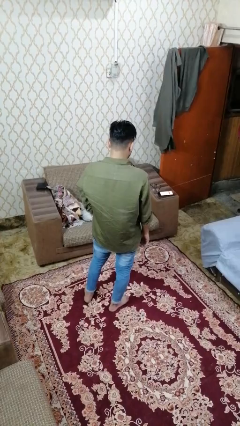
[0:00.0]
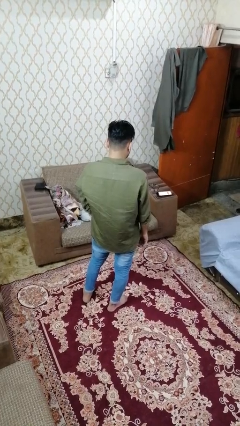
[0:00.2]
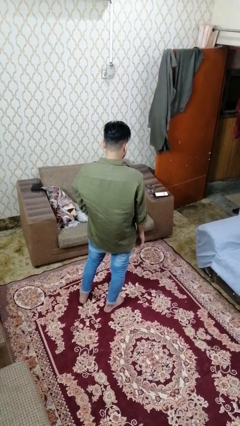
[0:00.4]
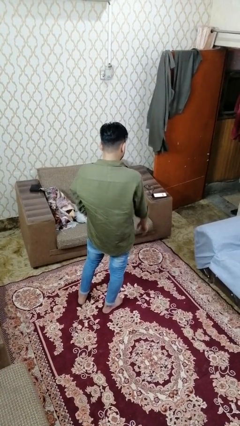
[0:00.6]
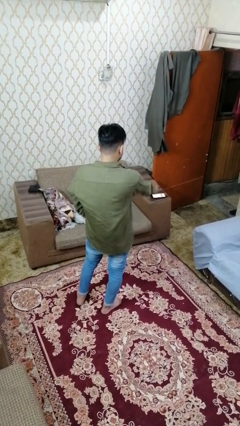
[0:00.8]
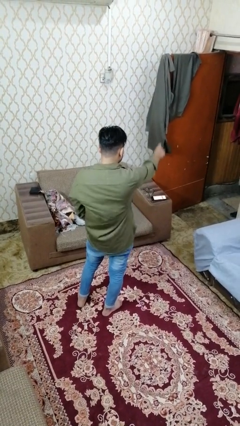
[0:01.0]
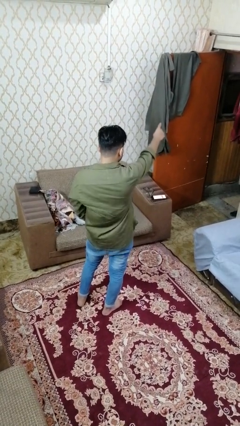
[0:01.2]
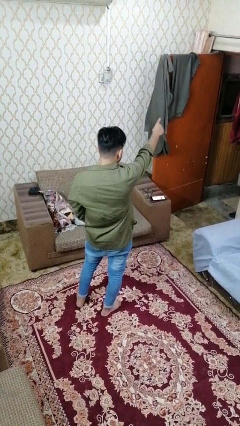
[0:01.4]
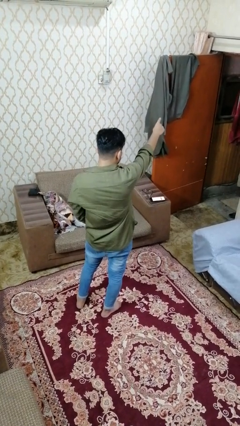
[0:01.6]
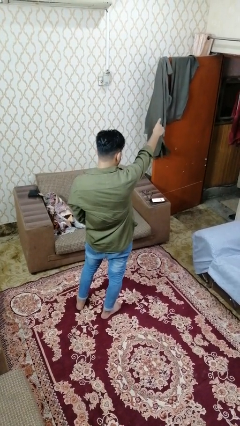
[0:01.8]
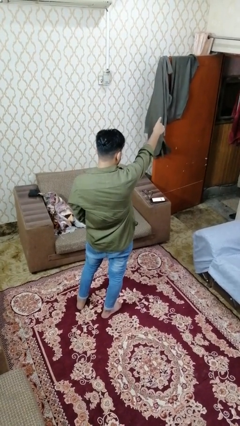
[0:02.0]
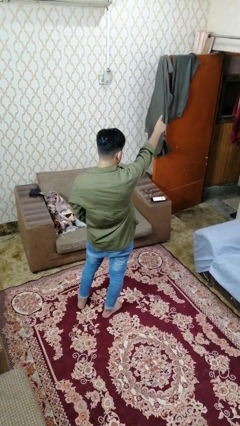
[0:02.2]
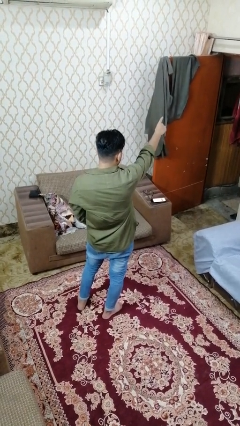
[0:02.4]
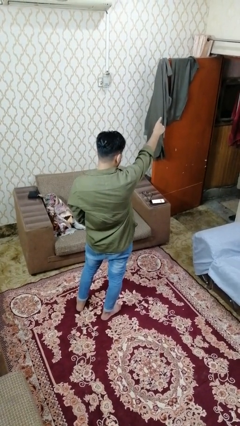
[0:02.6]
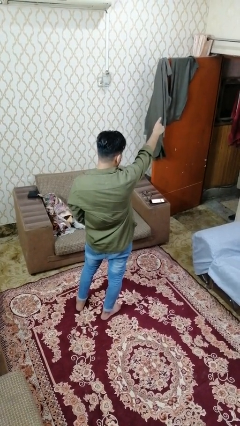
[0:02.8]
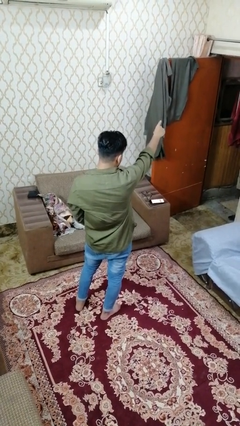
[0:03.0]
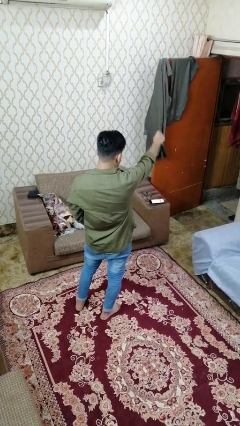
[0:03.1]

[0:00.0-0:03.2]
person points at person

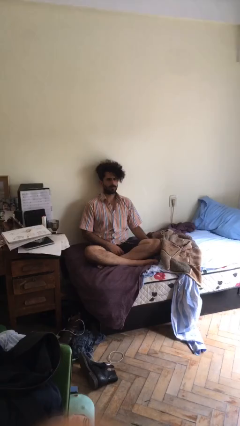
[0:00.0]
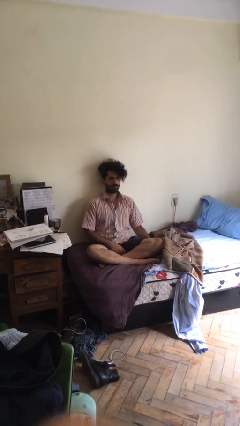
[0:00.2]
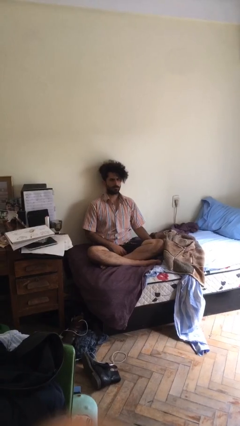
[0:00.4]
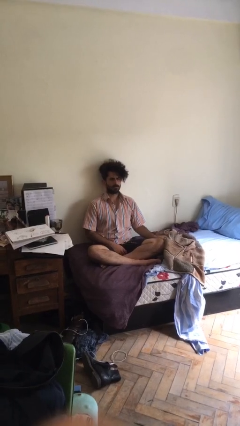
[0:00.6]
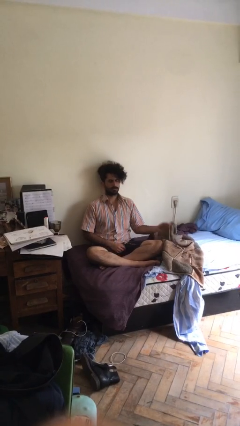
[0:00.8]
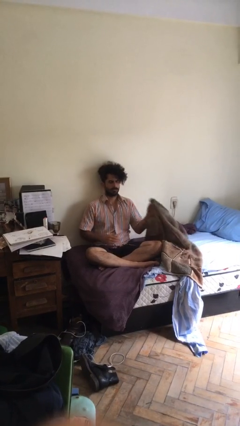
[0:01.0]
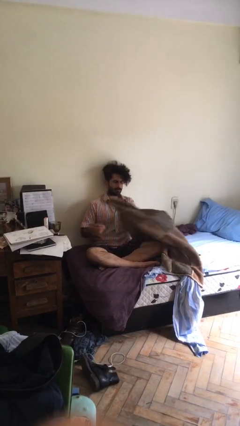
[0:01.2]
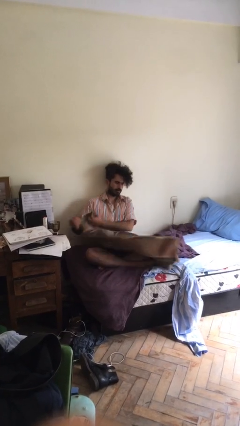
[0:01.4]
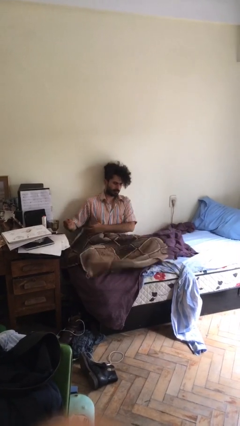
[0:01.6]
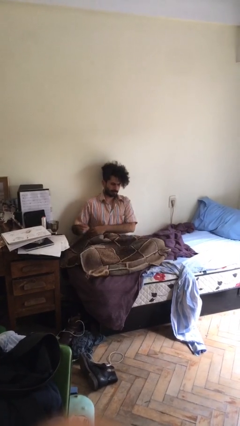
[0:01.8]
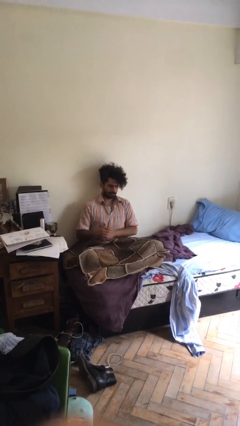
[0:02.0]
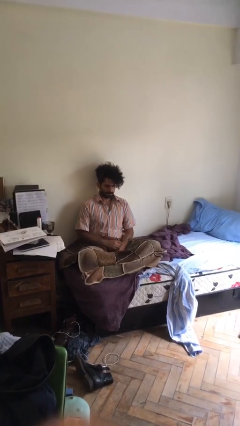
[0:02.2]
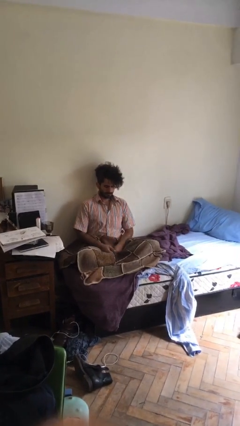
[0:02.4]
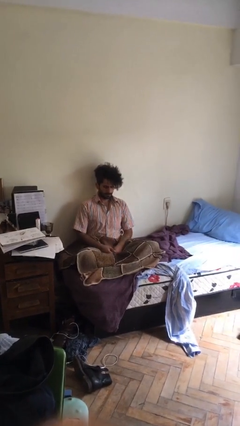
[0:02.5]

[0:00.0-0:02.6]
person covers with blanket

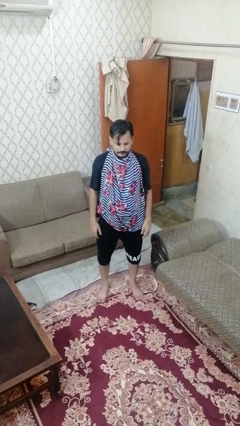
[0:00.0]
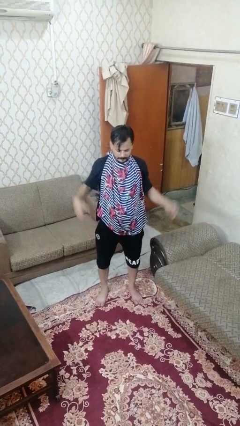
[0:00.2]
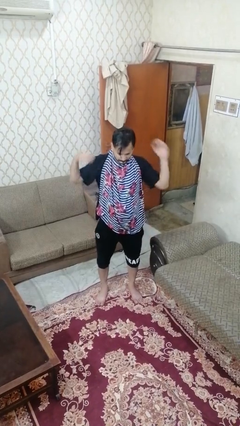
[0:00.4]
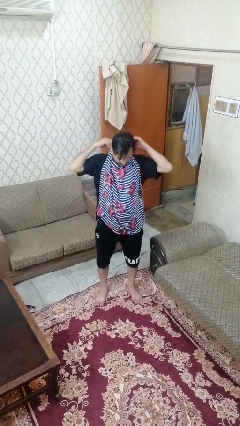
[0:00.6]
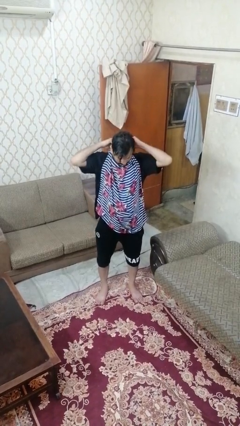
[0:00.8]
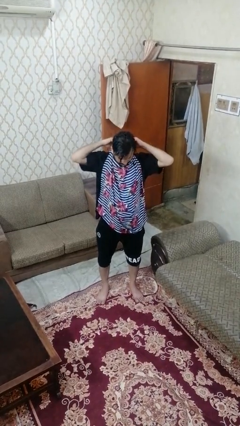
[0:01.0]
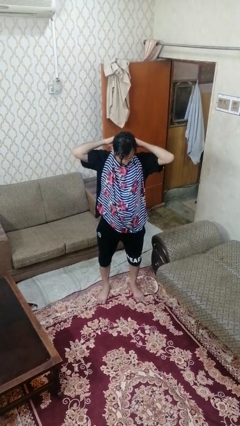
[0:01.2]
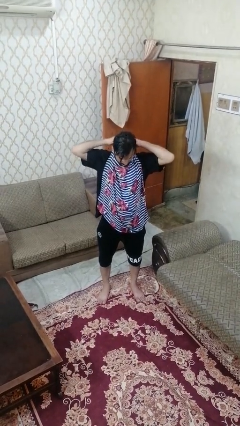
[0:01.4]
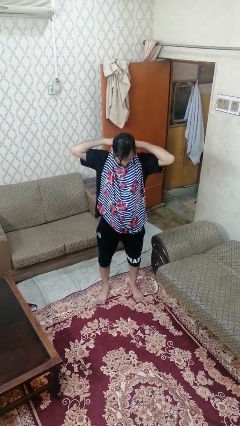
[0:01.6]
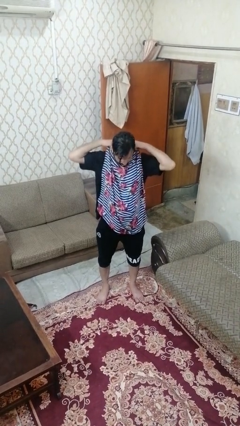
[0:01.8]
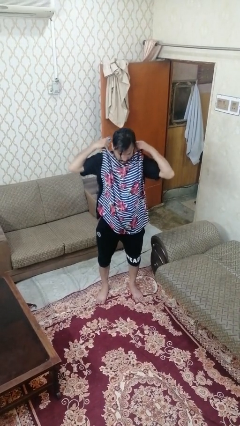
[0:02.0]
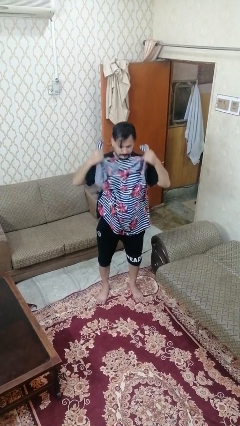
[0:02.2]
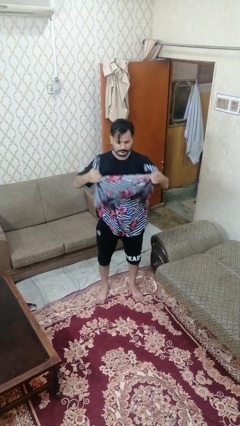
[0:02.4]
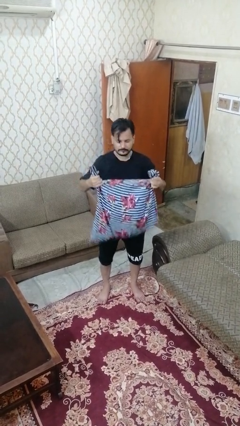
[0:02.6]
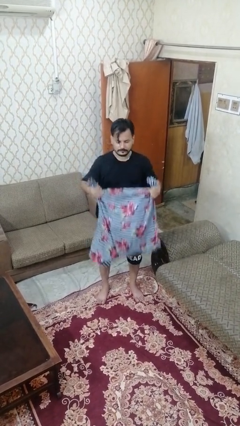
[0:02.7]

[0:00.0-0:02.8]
person takes off apron

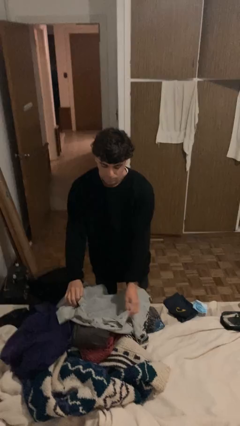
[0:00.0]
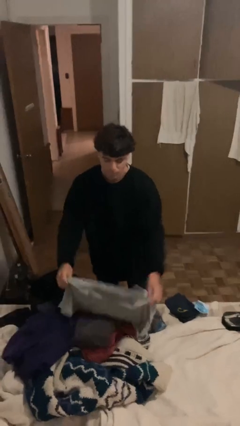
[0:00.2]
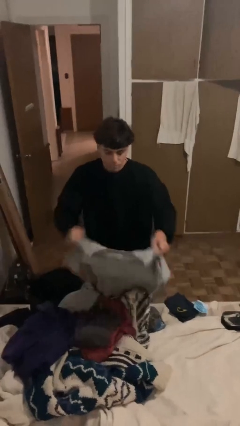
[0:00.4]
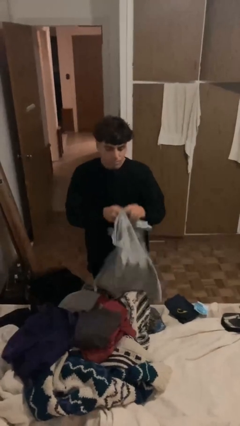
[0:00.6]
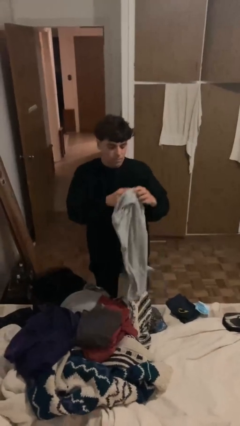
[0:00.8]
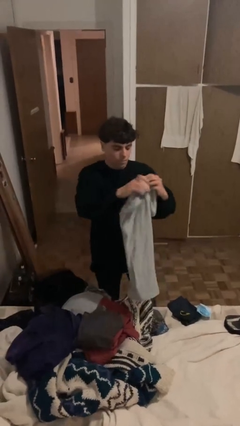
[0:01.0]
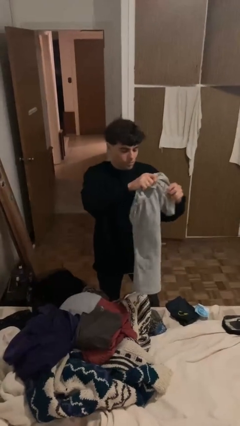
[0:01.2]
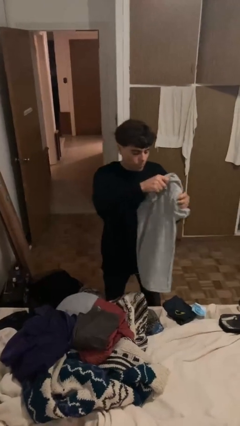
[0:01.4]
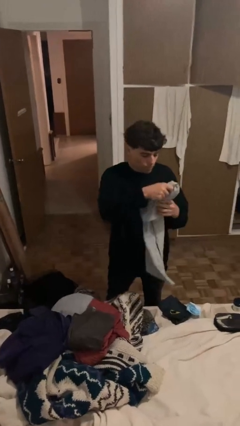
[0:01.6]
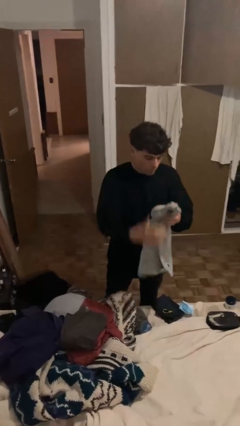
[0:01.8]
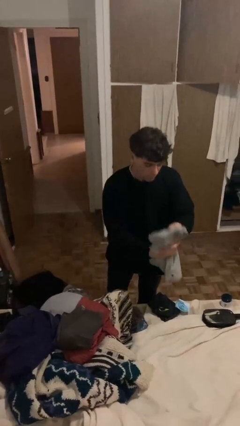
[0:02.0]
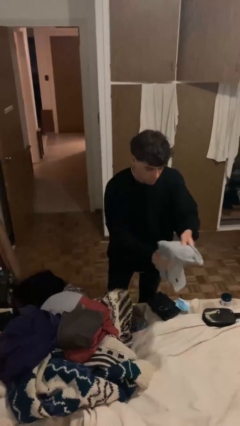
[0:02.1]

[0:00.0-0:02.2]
person folds shirt

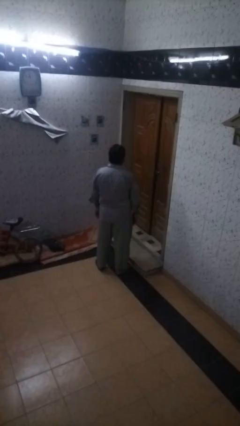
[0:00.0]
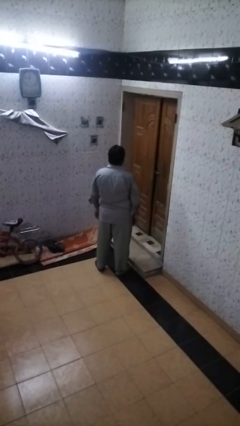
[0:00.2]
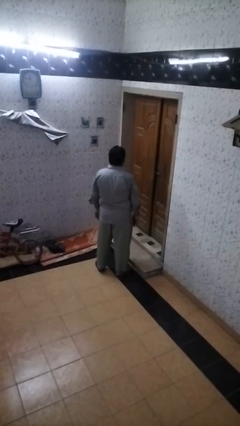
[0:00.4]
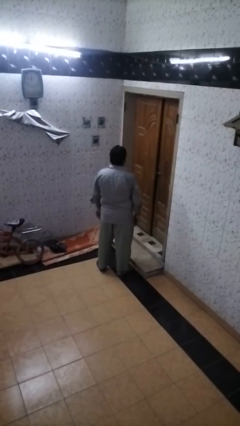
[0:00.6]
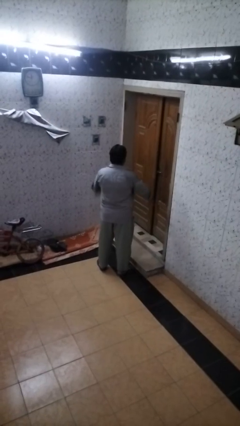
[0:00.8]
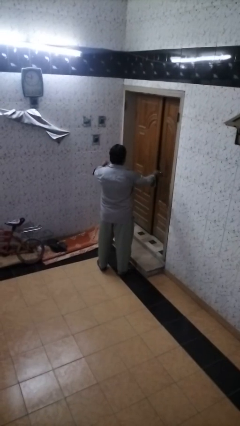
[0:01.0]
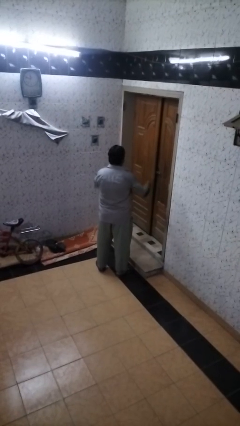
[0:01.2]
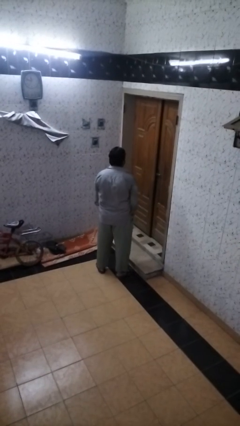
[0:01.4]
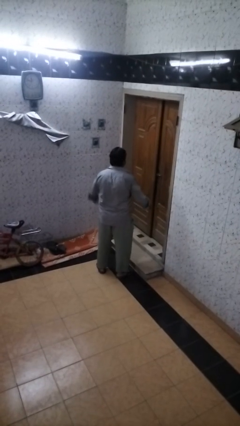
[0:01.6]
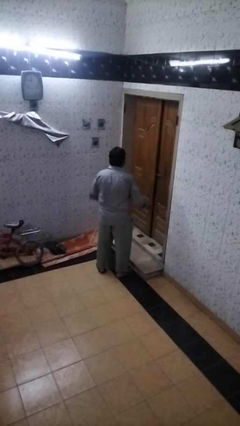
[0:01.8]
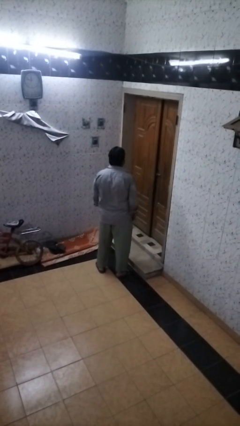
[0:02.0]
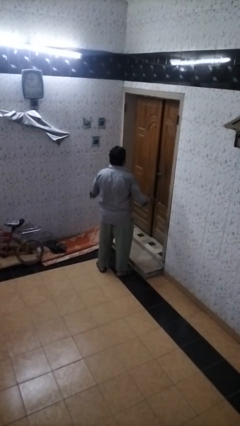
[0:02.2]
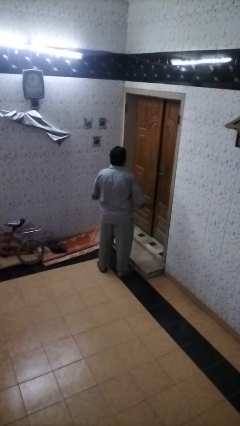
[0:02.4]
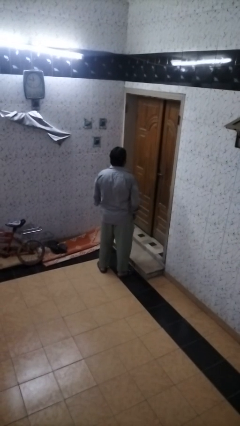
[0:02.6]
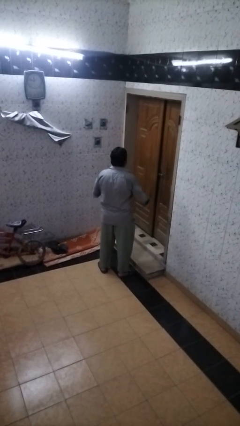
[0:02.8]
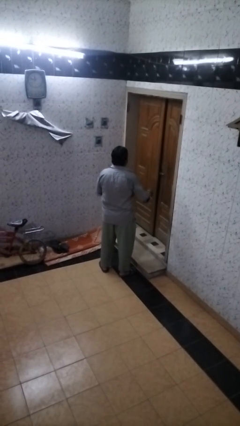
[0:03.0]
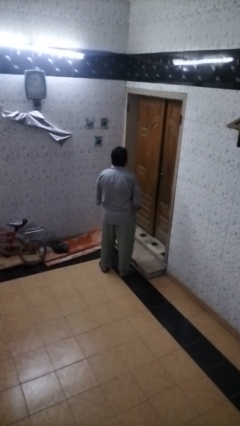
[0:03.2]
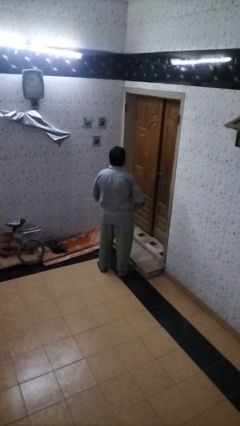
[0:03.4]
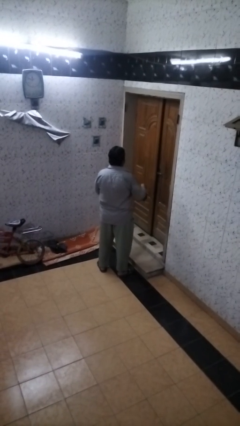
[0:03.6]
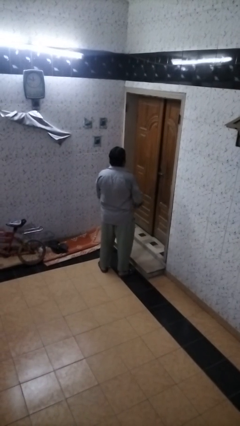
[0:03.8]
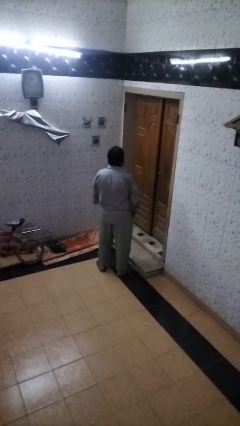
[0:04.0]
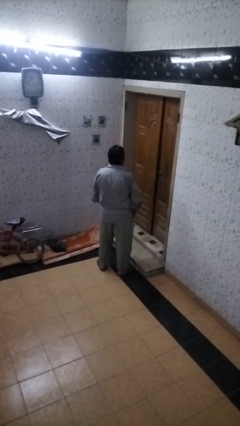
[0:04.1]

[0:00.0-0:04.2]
person slaps hands on thighs

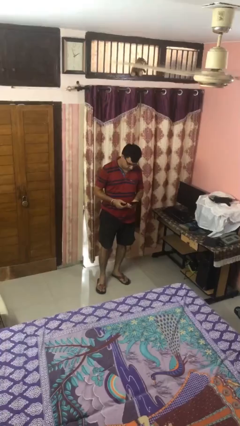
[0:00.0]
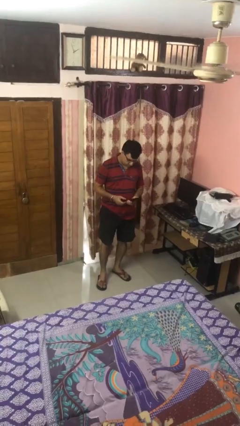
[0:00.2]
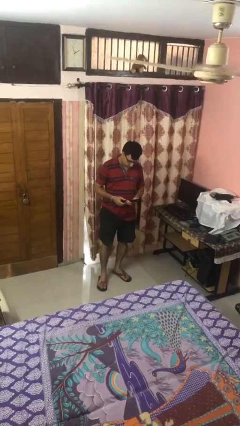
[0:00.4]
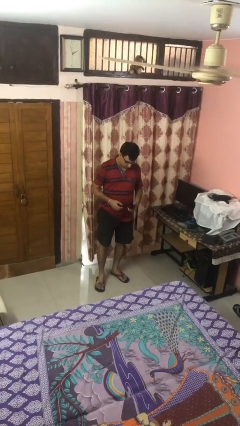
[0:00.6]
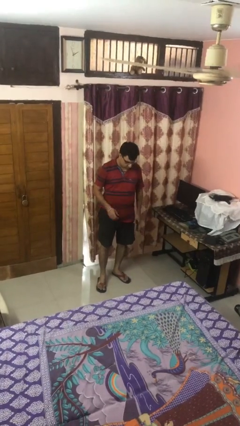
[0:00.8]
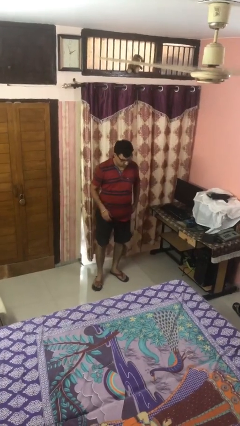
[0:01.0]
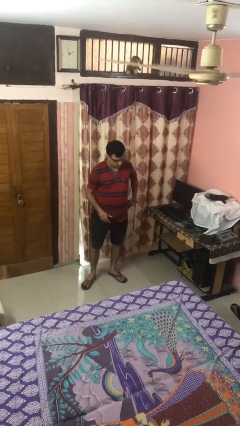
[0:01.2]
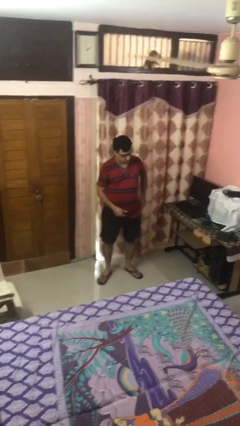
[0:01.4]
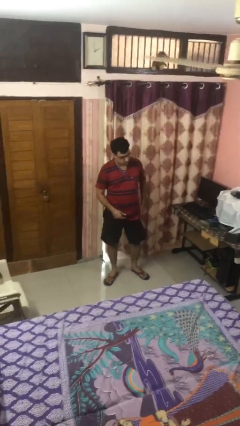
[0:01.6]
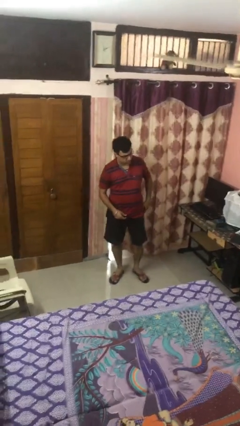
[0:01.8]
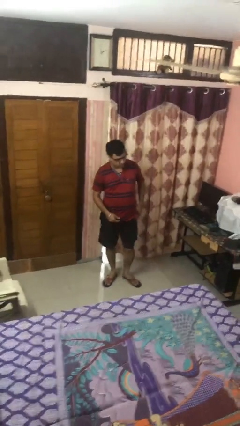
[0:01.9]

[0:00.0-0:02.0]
person puts phone into pocket

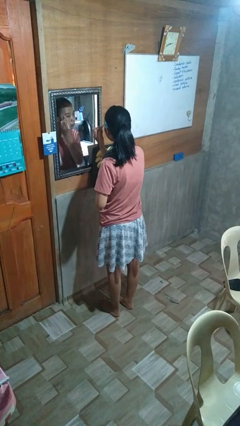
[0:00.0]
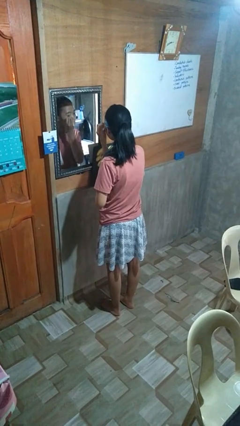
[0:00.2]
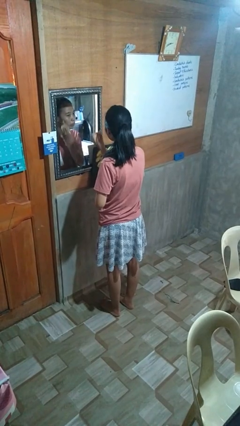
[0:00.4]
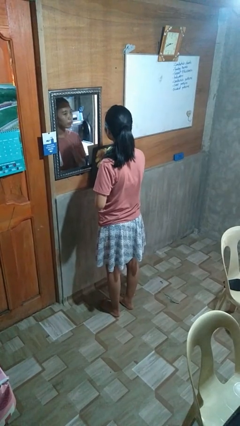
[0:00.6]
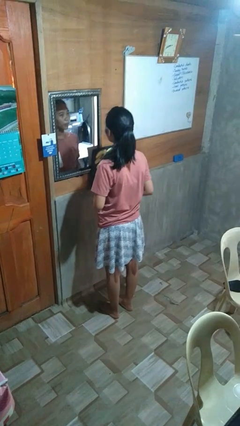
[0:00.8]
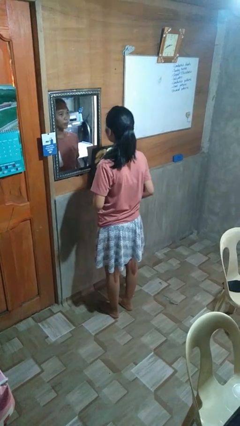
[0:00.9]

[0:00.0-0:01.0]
person applies eye makeup
